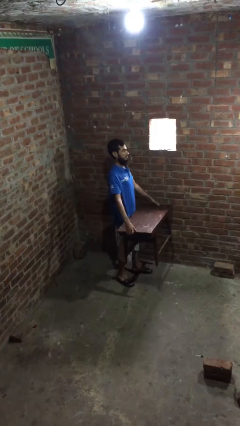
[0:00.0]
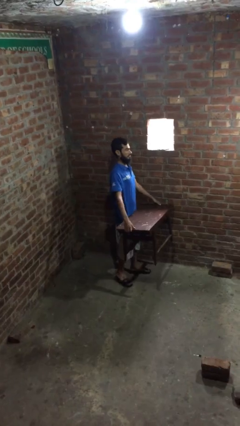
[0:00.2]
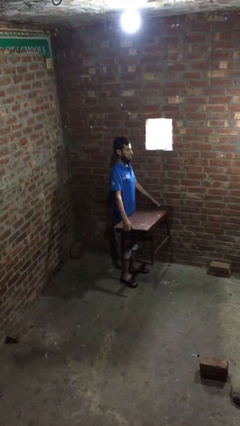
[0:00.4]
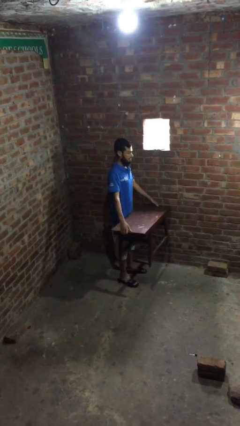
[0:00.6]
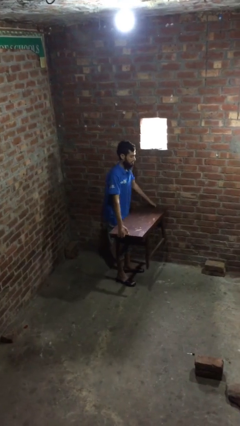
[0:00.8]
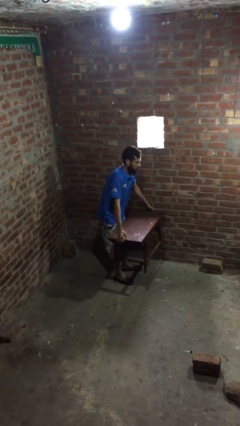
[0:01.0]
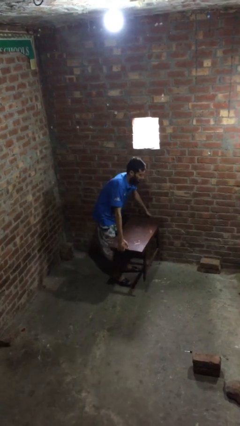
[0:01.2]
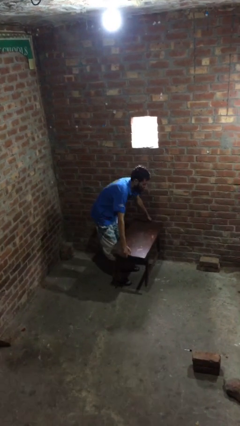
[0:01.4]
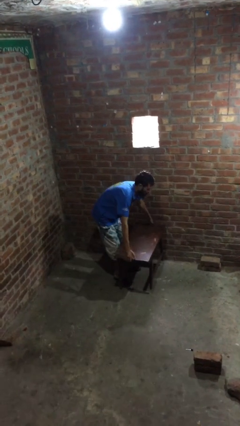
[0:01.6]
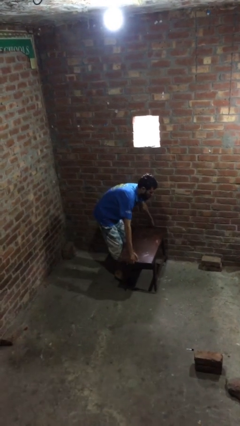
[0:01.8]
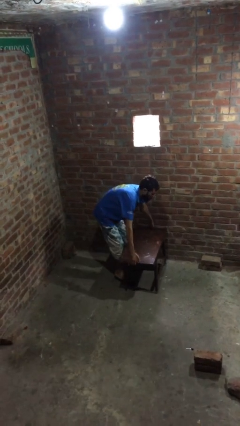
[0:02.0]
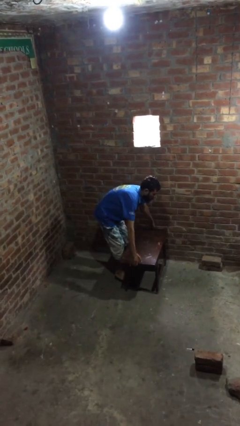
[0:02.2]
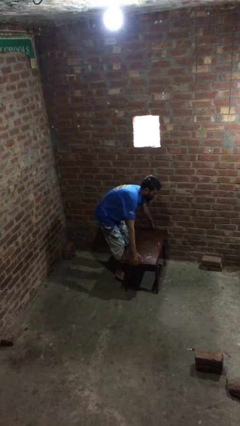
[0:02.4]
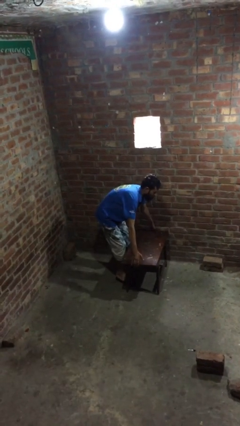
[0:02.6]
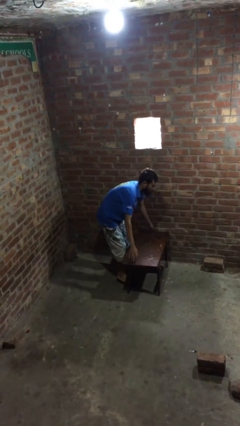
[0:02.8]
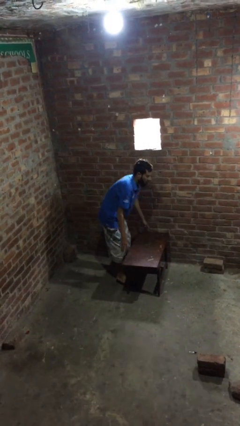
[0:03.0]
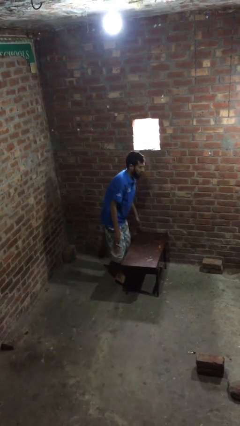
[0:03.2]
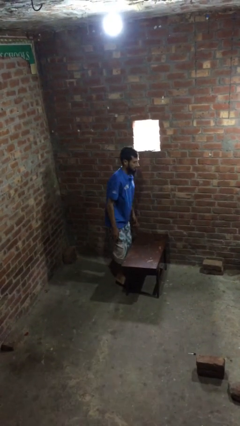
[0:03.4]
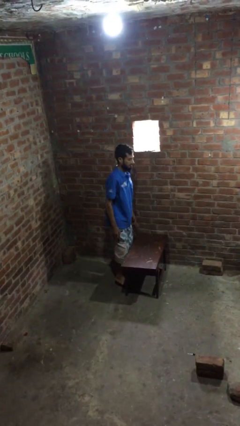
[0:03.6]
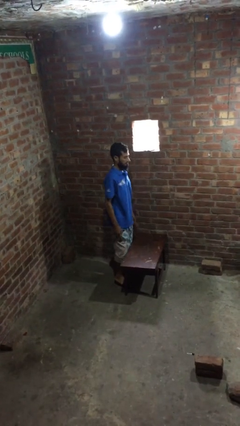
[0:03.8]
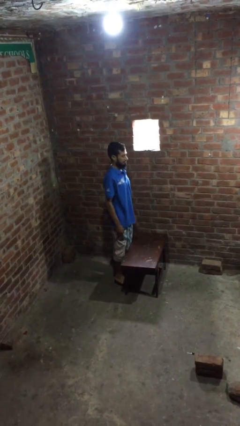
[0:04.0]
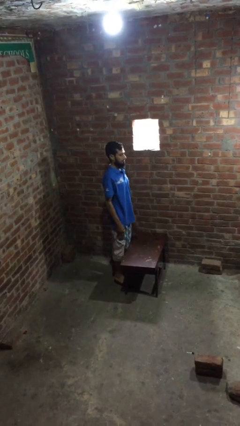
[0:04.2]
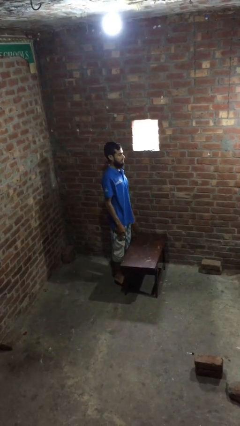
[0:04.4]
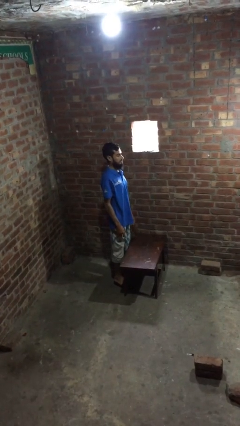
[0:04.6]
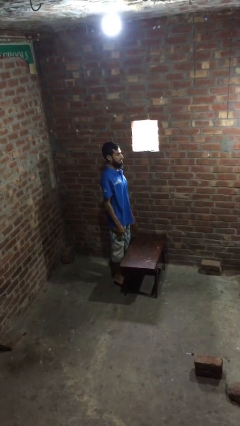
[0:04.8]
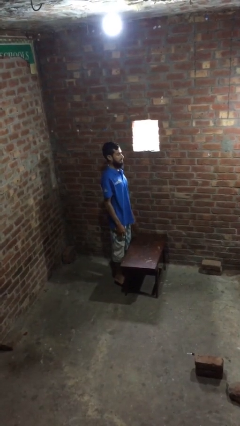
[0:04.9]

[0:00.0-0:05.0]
person puts down object on floor

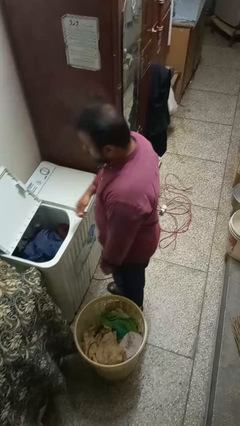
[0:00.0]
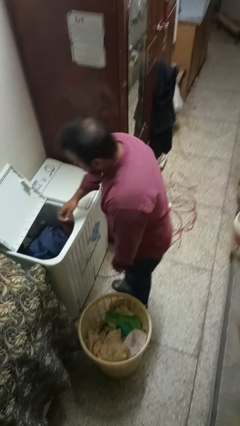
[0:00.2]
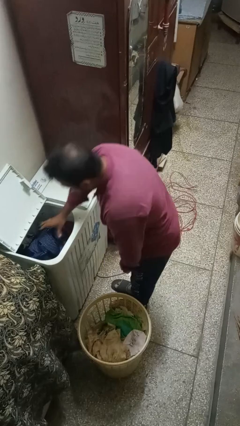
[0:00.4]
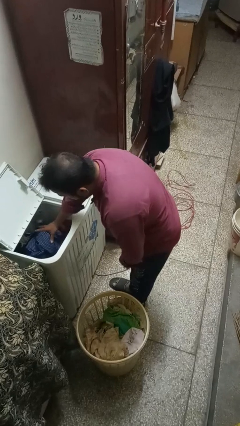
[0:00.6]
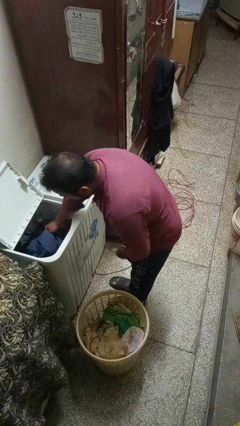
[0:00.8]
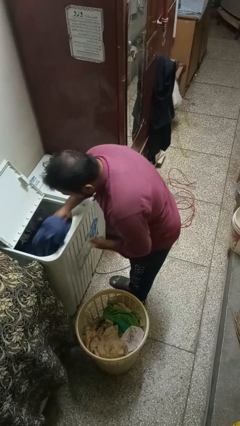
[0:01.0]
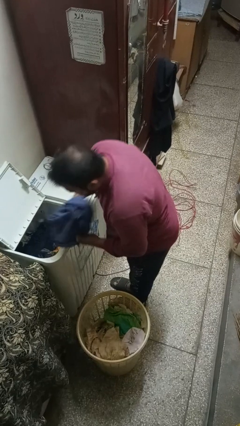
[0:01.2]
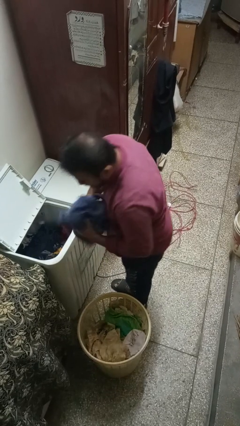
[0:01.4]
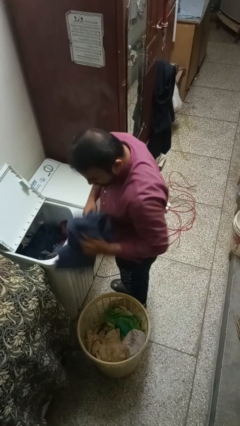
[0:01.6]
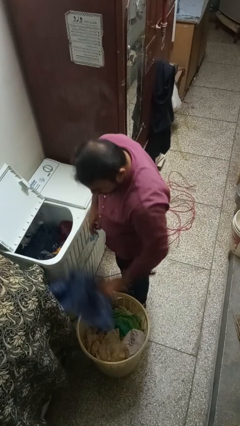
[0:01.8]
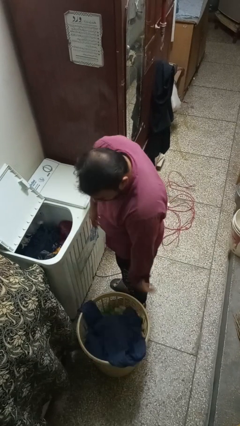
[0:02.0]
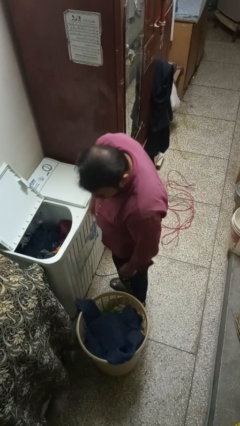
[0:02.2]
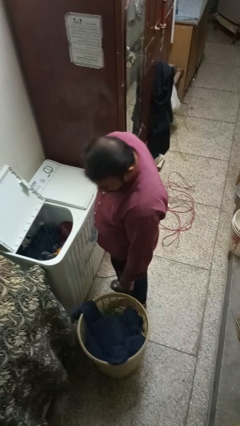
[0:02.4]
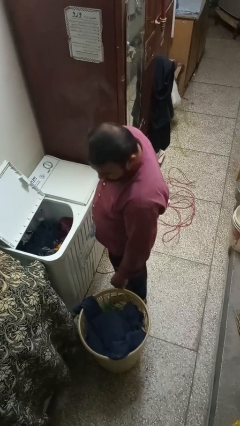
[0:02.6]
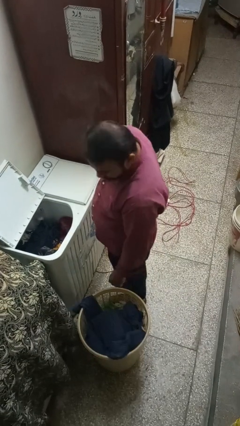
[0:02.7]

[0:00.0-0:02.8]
person unloads clotheswasher

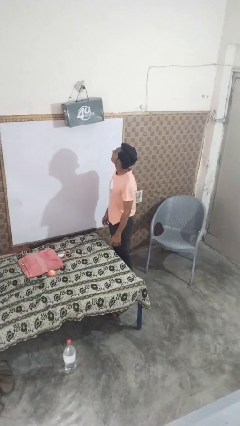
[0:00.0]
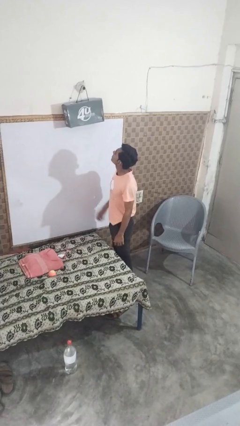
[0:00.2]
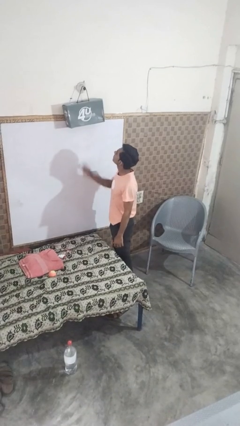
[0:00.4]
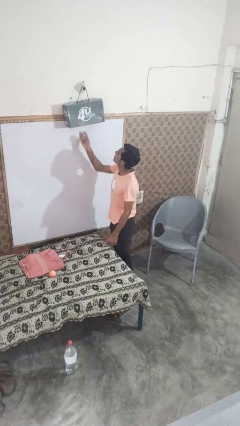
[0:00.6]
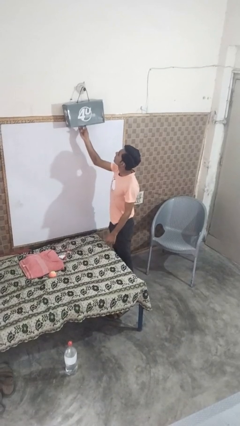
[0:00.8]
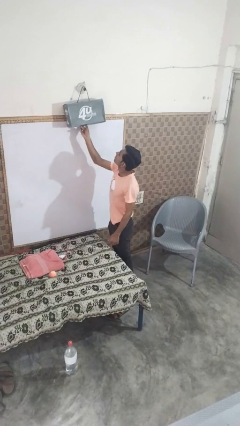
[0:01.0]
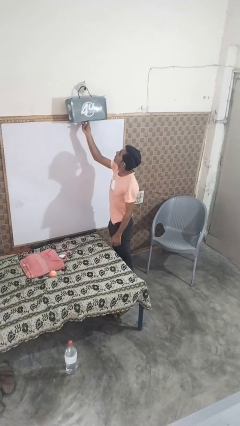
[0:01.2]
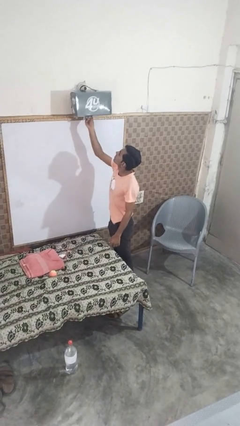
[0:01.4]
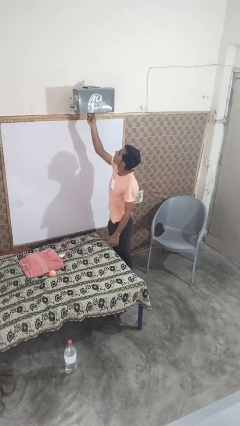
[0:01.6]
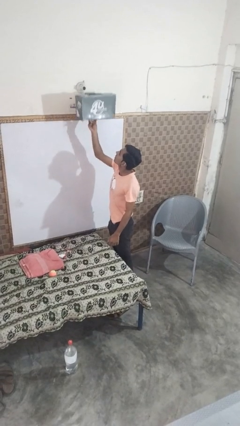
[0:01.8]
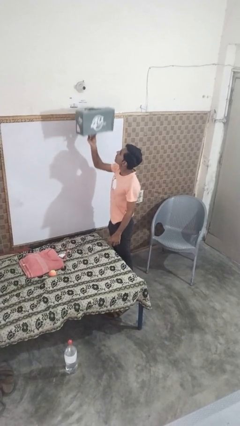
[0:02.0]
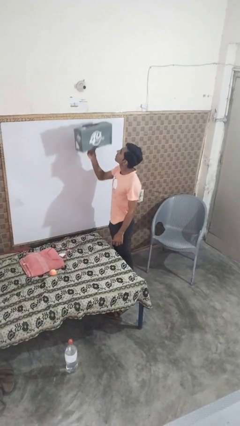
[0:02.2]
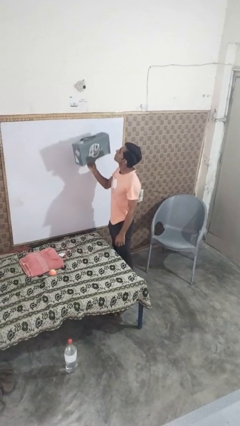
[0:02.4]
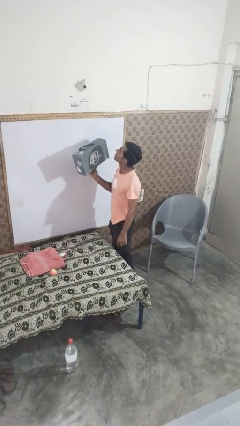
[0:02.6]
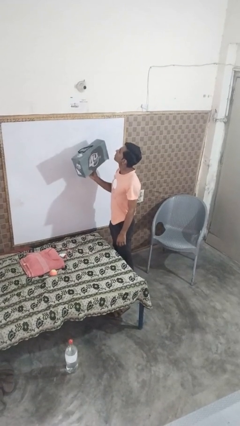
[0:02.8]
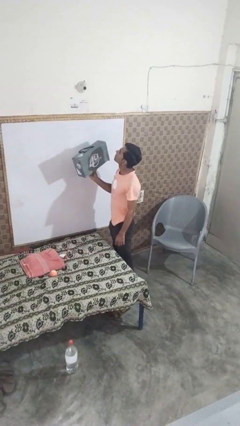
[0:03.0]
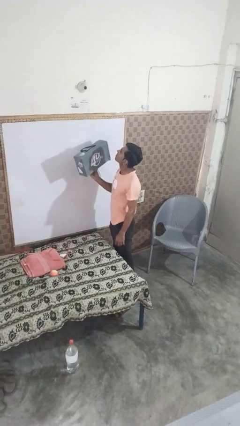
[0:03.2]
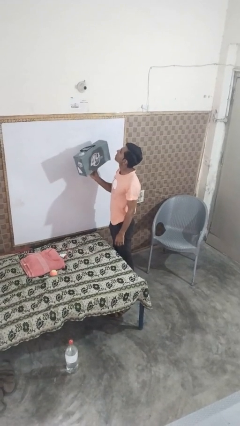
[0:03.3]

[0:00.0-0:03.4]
person takes down smoke detector

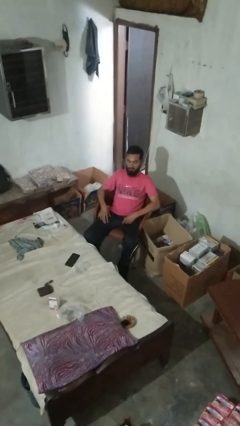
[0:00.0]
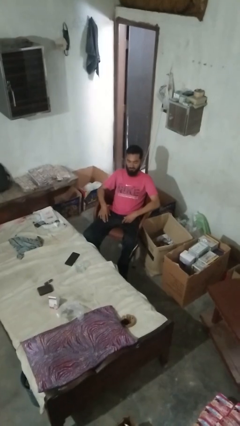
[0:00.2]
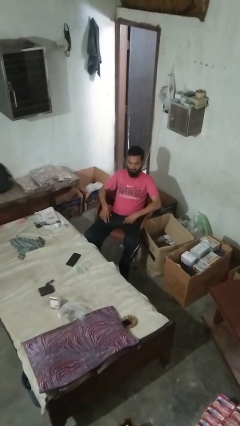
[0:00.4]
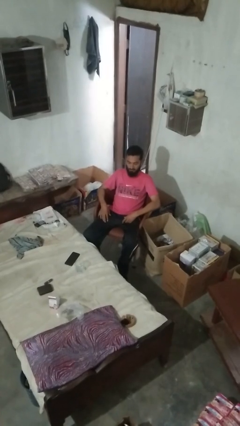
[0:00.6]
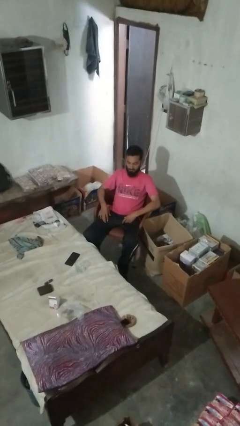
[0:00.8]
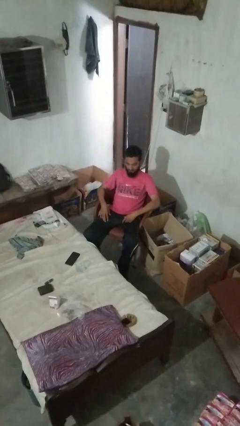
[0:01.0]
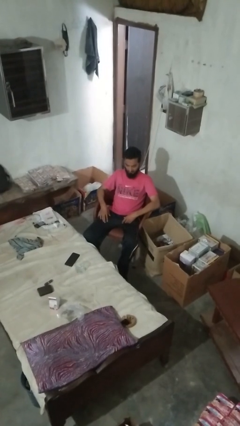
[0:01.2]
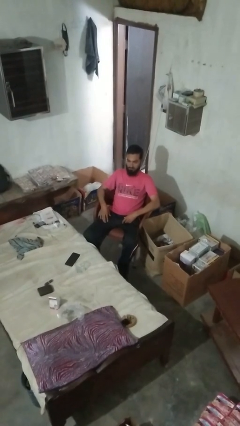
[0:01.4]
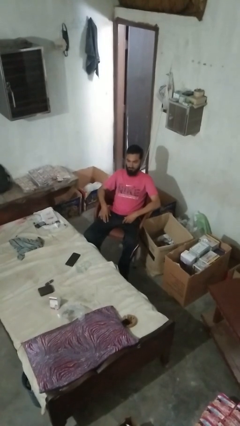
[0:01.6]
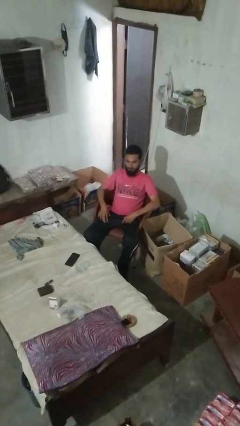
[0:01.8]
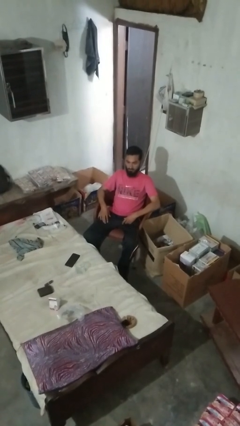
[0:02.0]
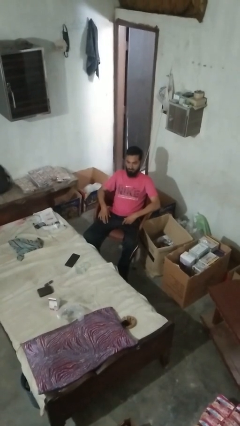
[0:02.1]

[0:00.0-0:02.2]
person nods head

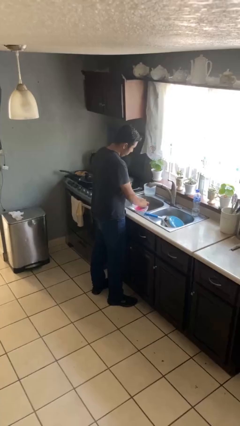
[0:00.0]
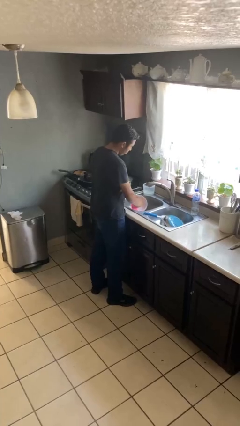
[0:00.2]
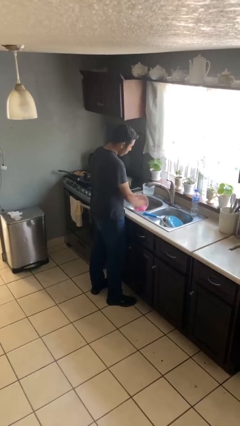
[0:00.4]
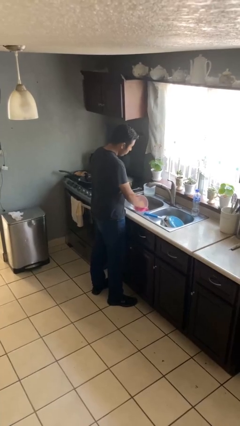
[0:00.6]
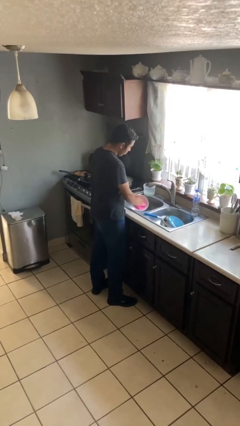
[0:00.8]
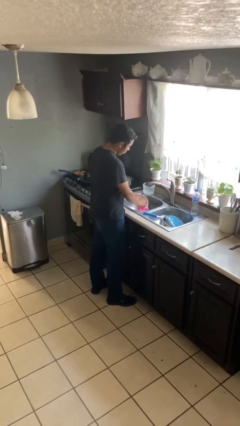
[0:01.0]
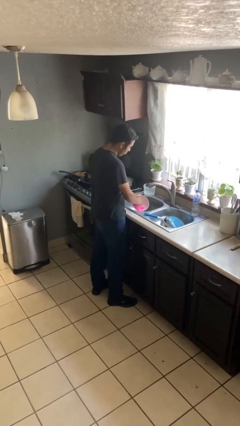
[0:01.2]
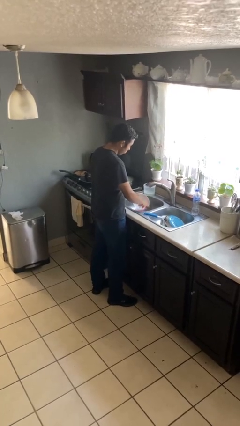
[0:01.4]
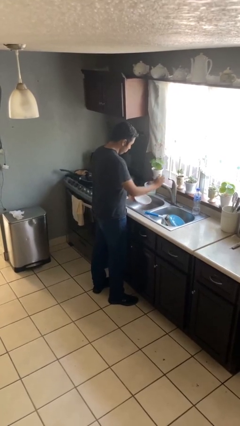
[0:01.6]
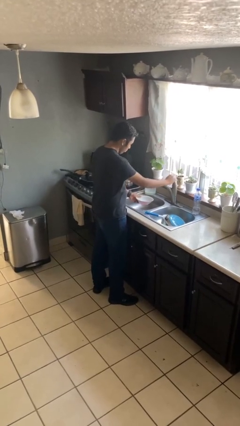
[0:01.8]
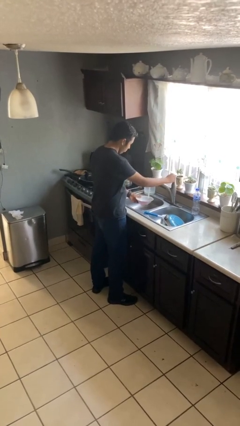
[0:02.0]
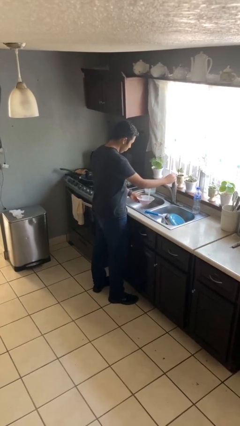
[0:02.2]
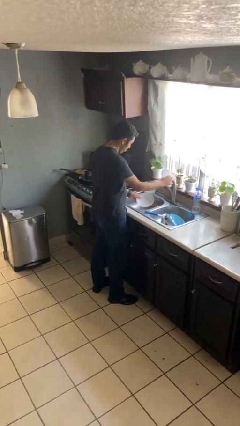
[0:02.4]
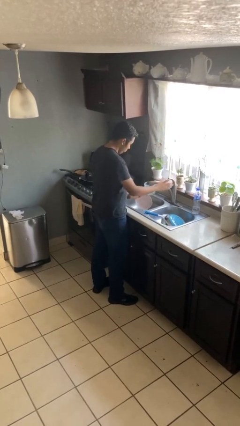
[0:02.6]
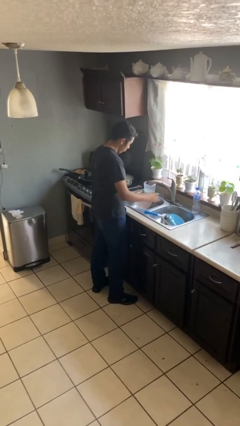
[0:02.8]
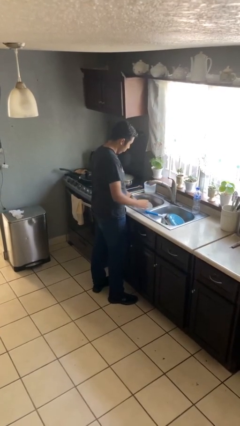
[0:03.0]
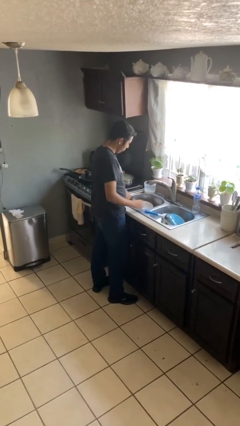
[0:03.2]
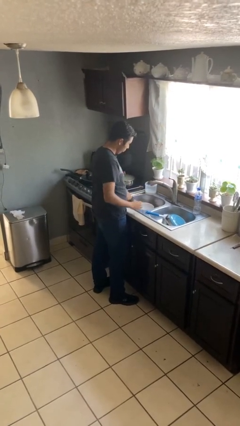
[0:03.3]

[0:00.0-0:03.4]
person washes dish

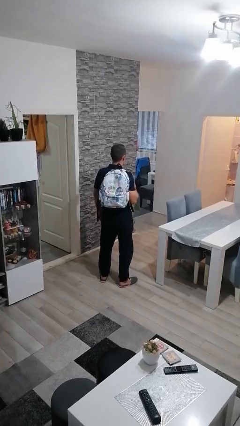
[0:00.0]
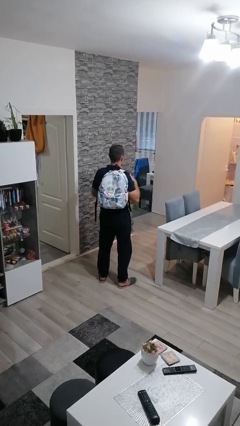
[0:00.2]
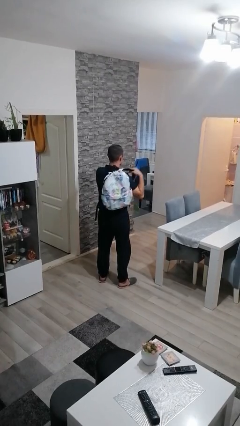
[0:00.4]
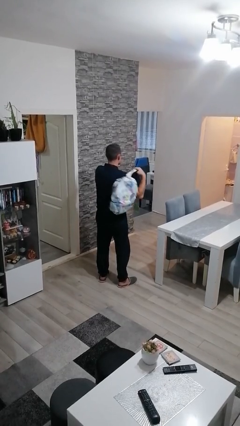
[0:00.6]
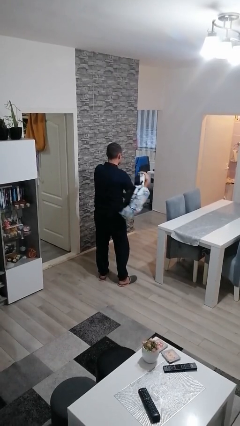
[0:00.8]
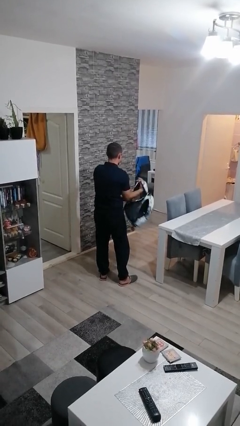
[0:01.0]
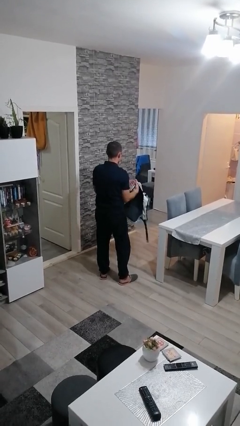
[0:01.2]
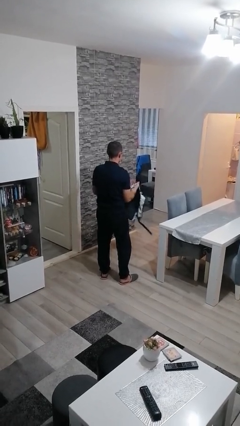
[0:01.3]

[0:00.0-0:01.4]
person takes off backpack
